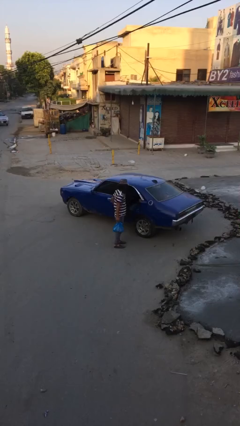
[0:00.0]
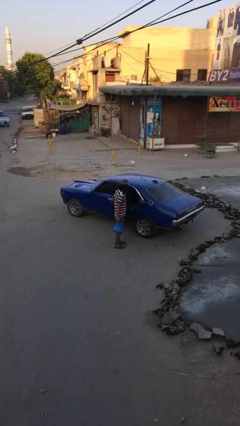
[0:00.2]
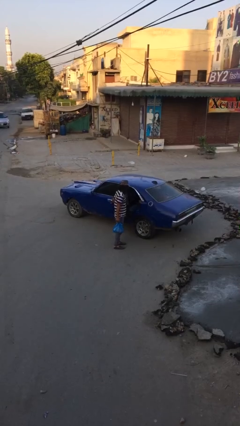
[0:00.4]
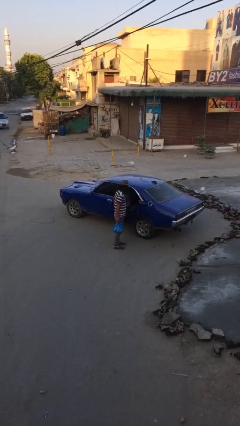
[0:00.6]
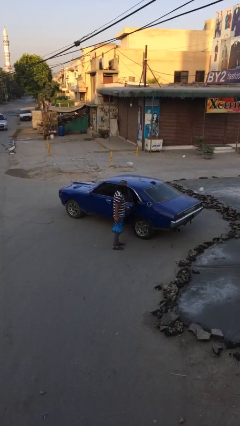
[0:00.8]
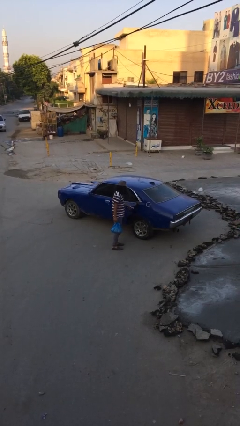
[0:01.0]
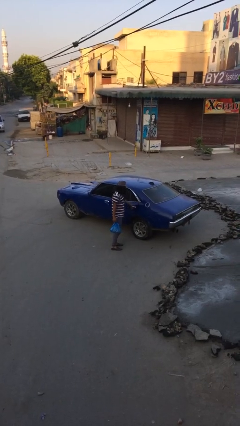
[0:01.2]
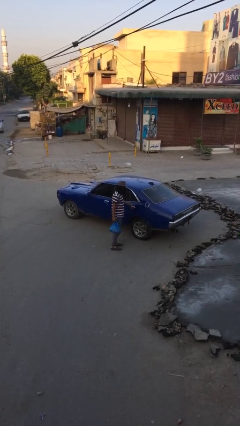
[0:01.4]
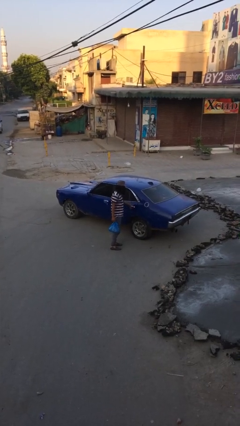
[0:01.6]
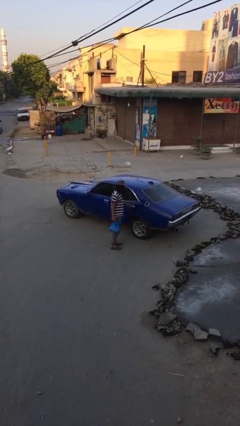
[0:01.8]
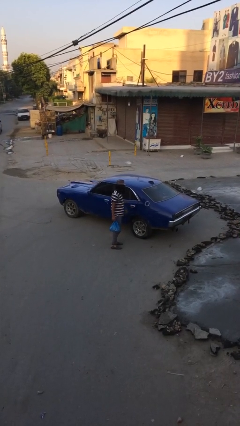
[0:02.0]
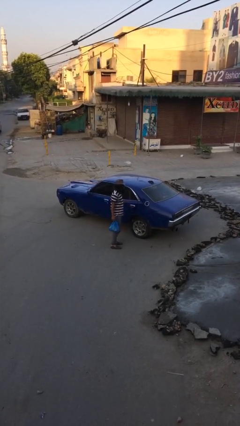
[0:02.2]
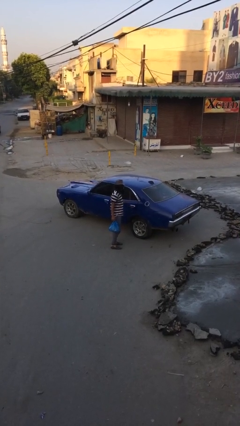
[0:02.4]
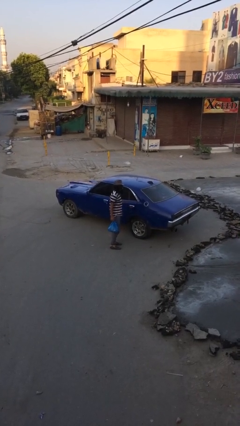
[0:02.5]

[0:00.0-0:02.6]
person closes car door

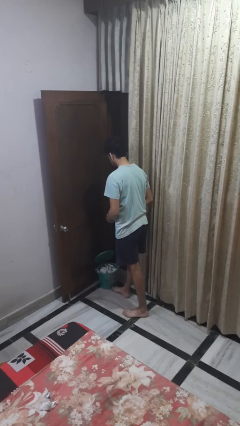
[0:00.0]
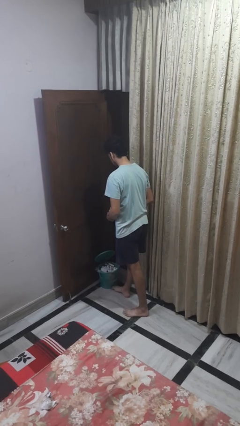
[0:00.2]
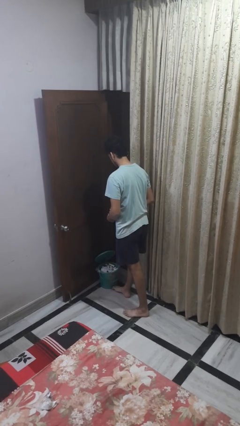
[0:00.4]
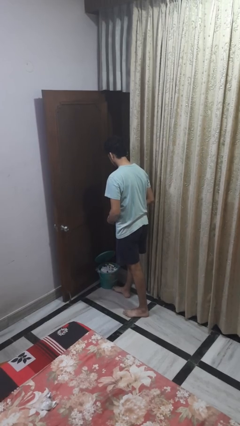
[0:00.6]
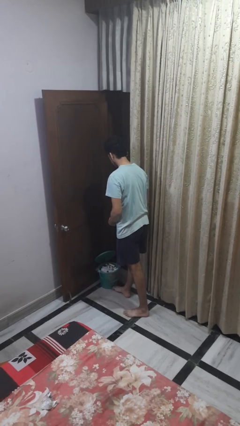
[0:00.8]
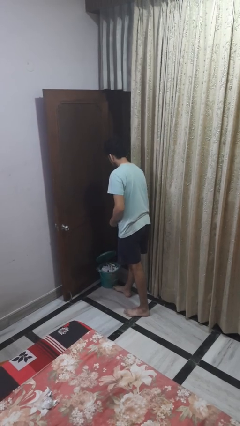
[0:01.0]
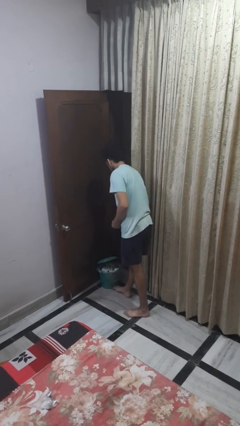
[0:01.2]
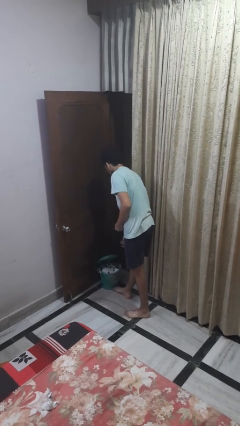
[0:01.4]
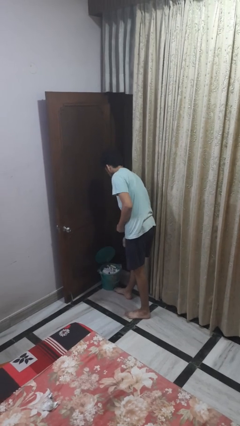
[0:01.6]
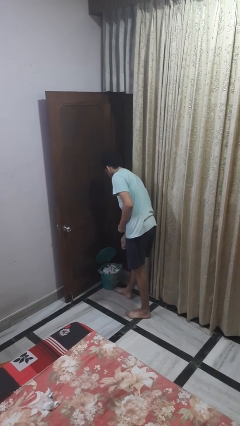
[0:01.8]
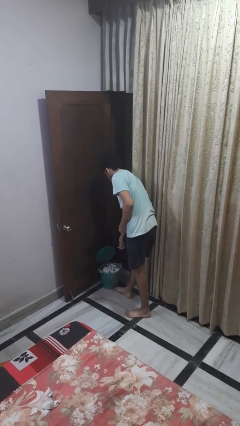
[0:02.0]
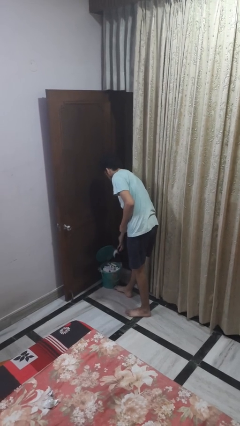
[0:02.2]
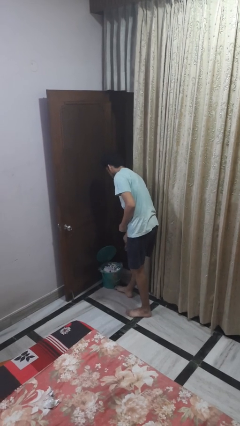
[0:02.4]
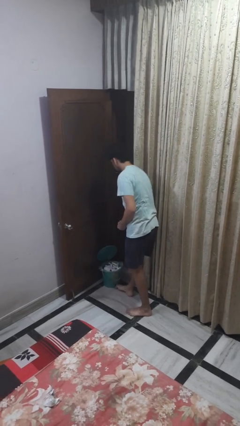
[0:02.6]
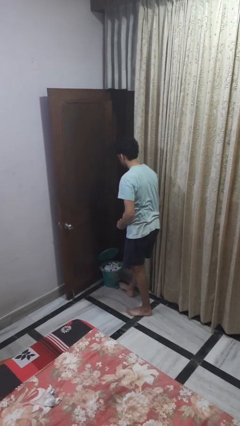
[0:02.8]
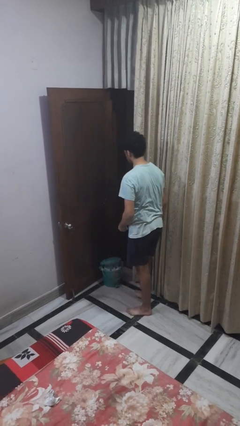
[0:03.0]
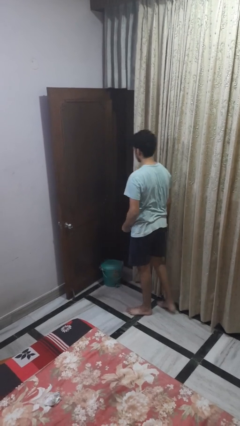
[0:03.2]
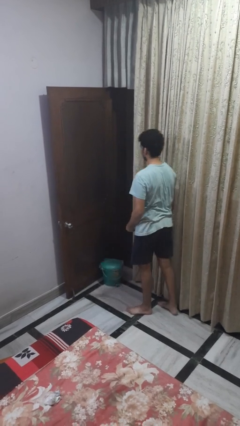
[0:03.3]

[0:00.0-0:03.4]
person discards trash

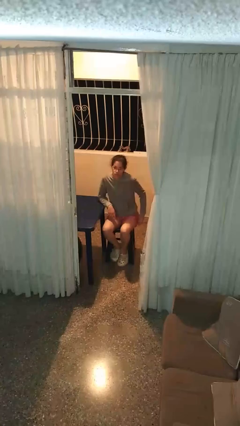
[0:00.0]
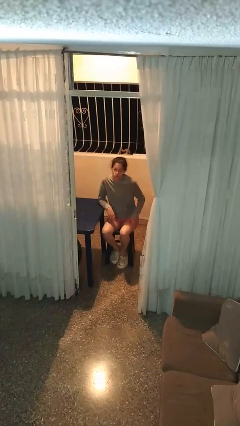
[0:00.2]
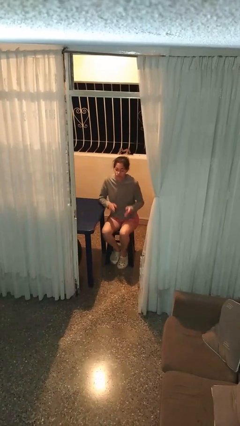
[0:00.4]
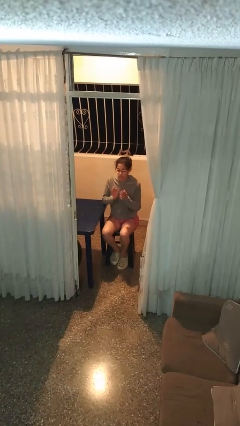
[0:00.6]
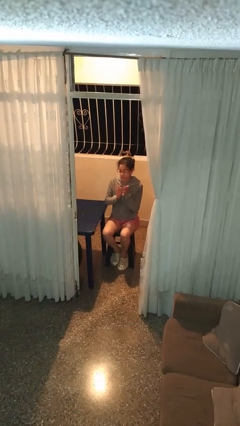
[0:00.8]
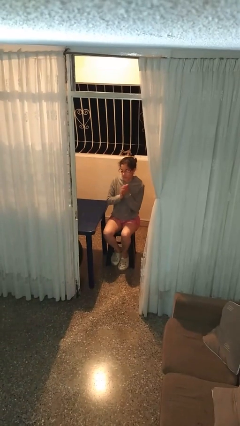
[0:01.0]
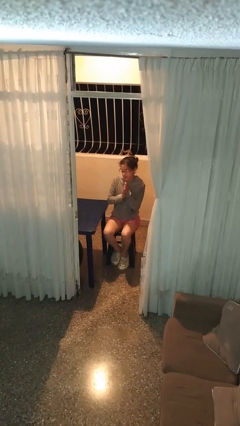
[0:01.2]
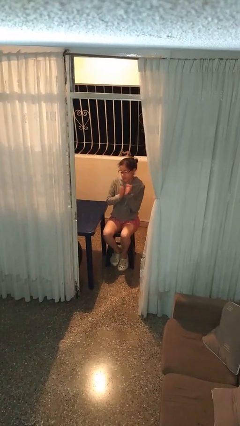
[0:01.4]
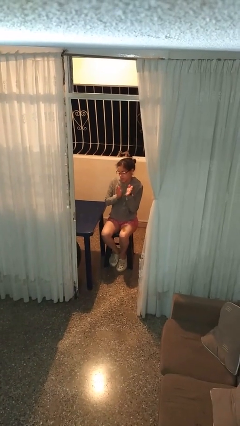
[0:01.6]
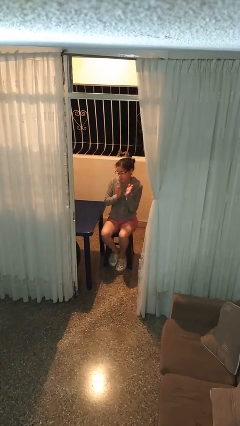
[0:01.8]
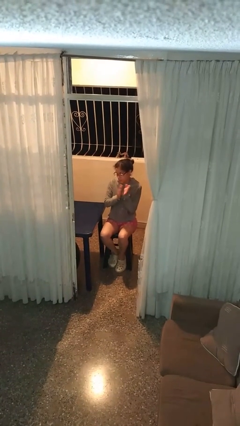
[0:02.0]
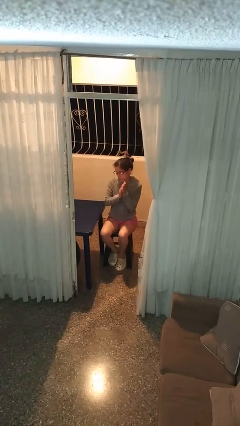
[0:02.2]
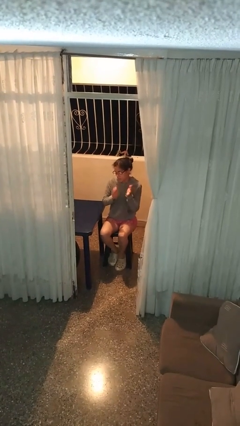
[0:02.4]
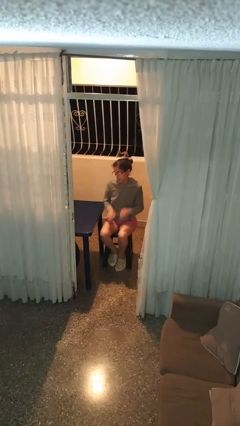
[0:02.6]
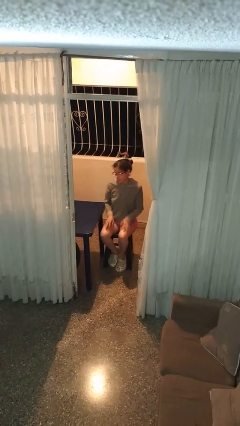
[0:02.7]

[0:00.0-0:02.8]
person claps hands

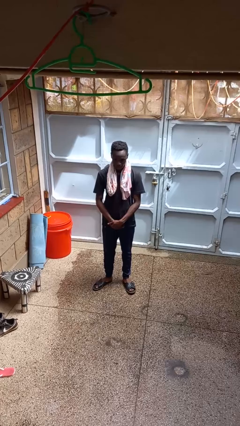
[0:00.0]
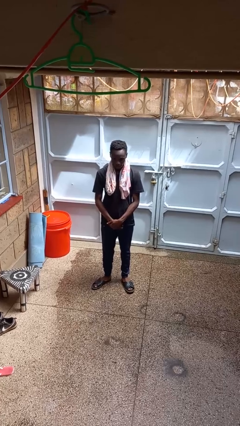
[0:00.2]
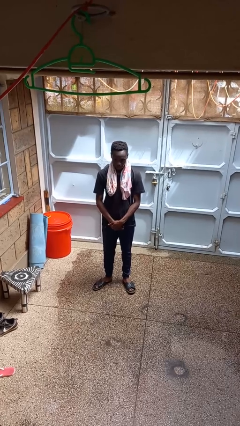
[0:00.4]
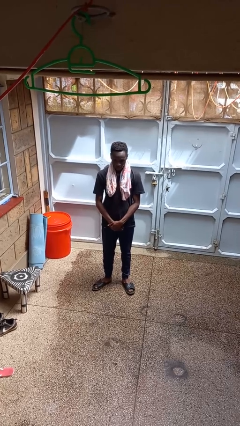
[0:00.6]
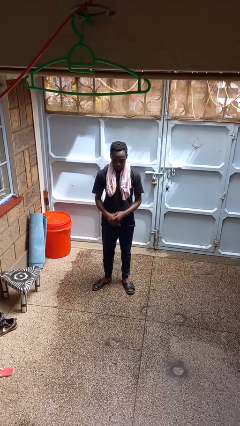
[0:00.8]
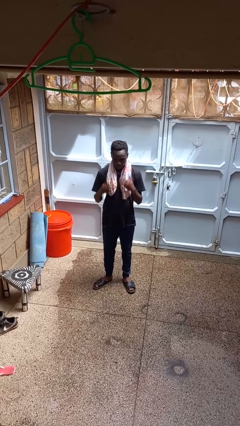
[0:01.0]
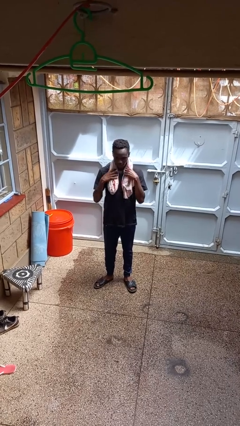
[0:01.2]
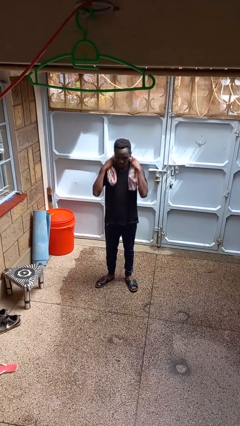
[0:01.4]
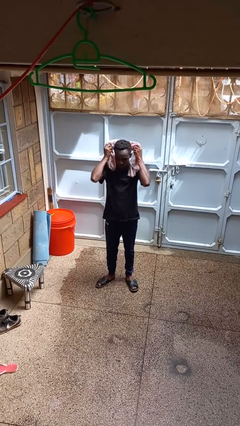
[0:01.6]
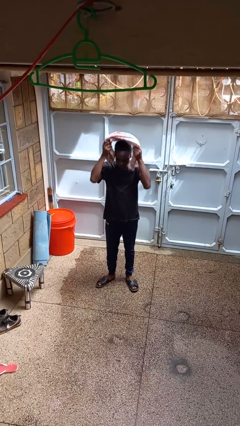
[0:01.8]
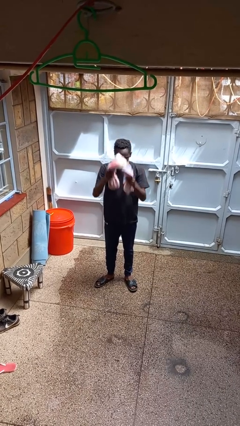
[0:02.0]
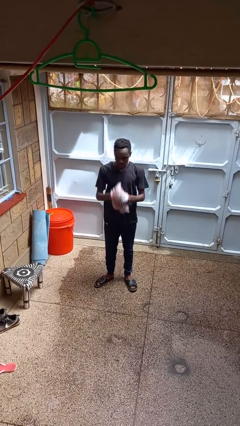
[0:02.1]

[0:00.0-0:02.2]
person takes off scarf

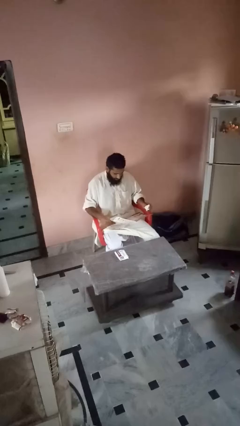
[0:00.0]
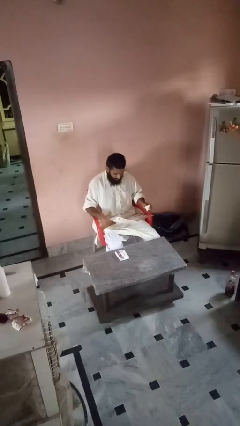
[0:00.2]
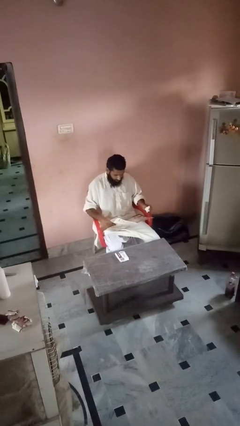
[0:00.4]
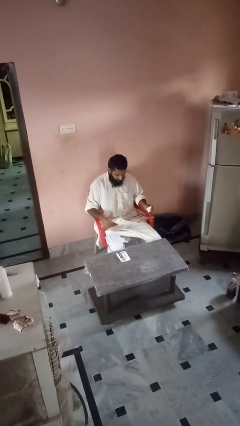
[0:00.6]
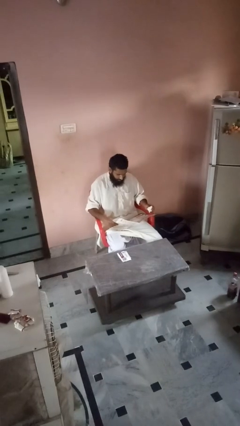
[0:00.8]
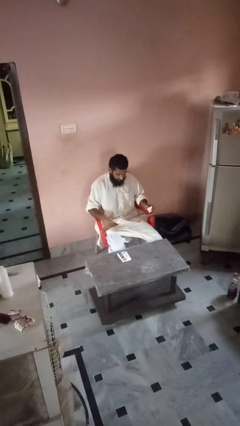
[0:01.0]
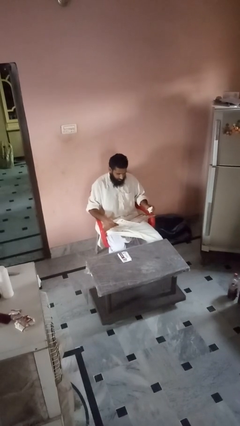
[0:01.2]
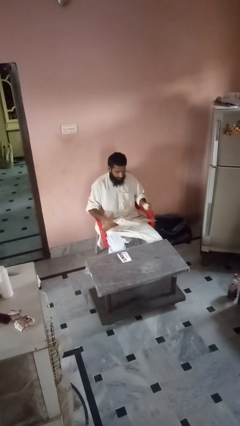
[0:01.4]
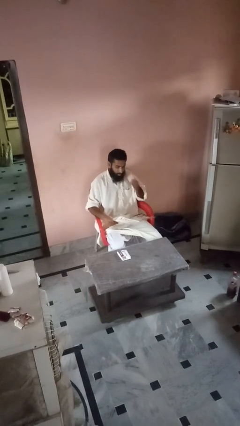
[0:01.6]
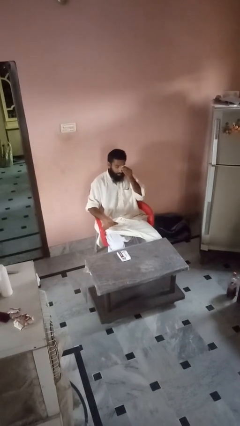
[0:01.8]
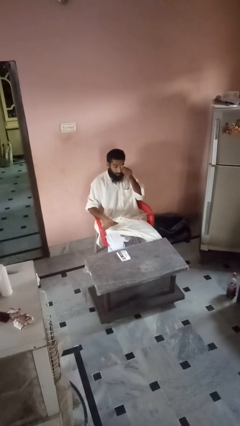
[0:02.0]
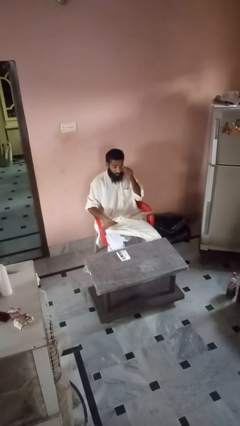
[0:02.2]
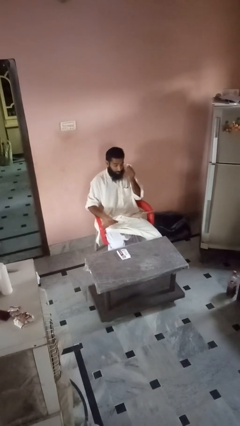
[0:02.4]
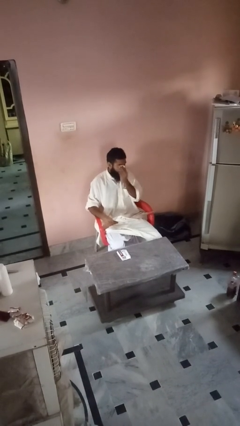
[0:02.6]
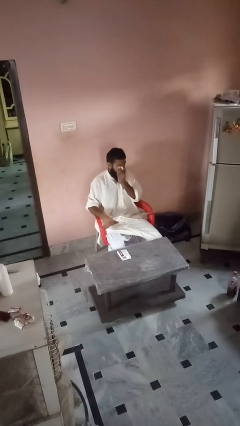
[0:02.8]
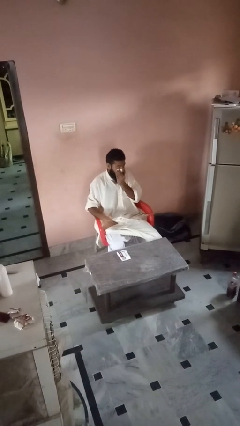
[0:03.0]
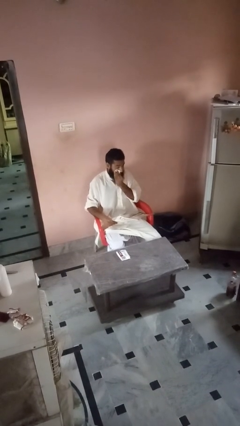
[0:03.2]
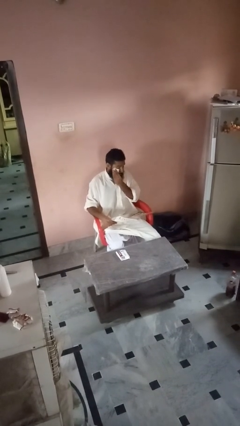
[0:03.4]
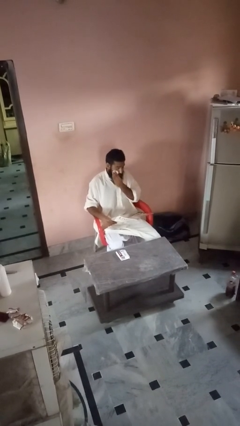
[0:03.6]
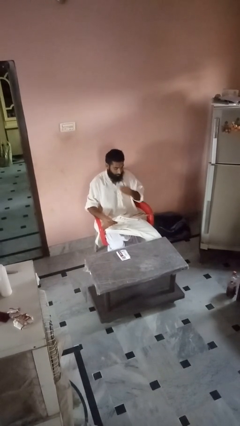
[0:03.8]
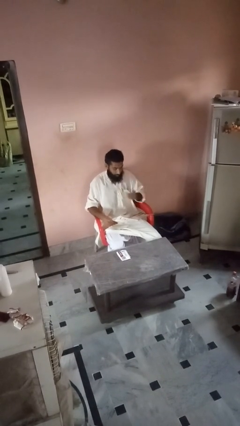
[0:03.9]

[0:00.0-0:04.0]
person tears paper

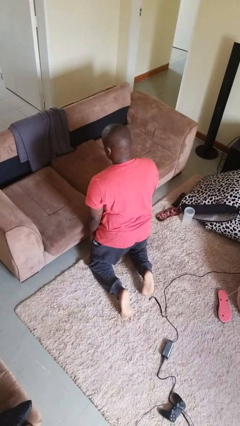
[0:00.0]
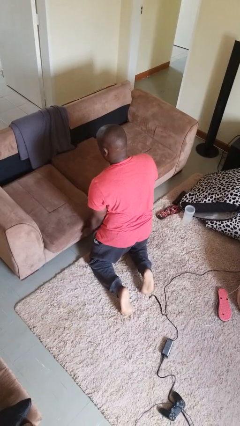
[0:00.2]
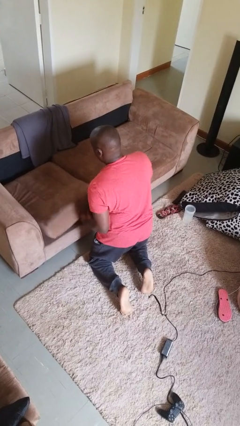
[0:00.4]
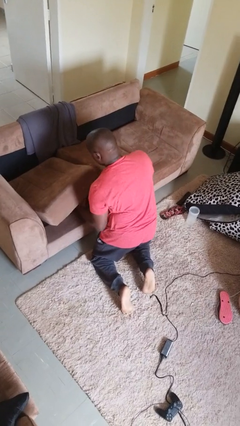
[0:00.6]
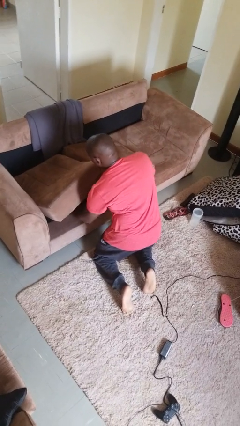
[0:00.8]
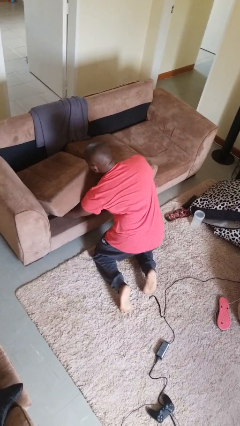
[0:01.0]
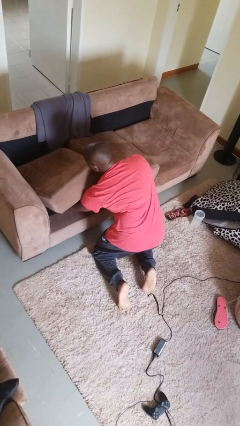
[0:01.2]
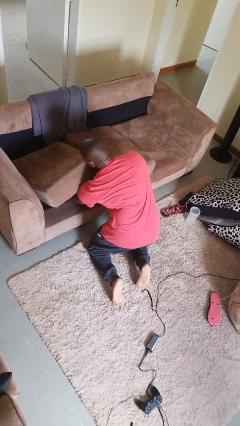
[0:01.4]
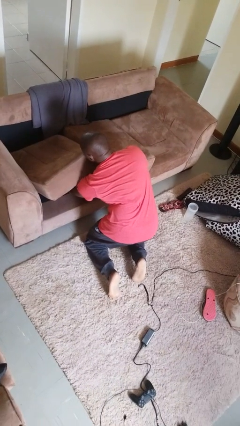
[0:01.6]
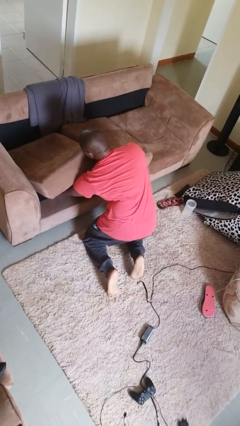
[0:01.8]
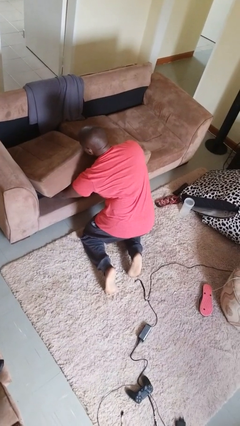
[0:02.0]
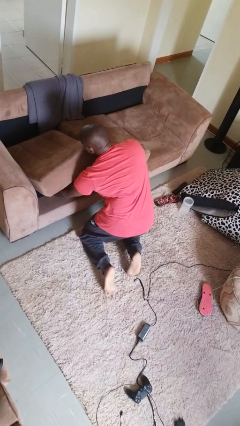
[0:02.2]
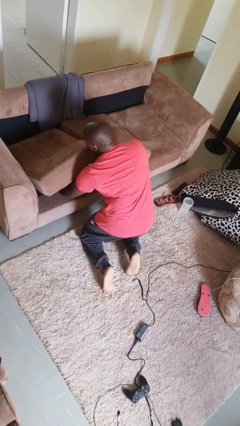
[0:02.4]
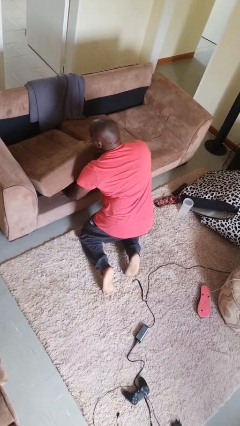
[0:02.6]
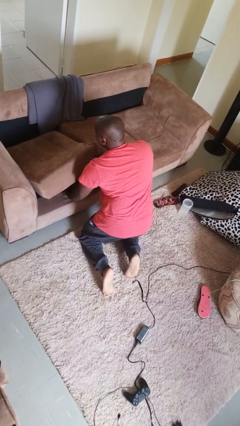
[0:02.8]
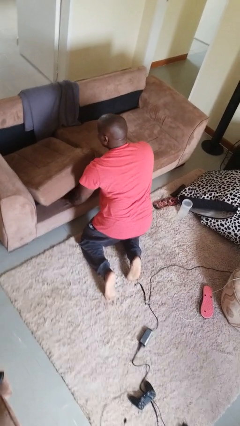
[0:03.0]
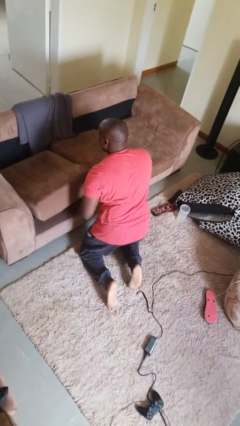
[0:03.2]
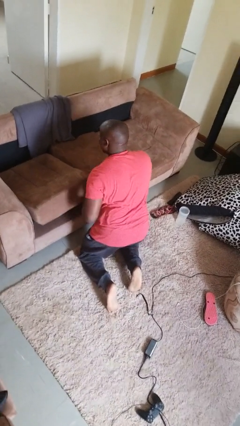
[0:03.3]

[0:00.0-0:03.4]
person searches under couch
